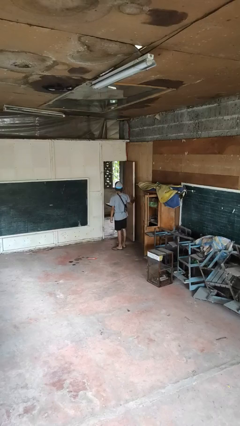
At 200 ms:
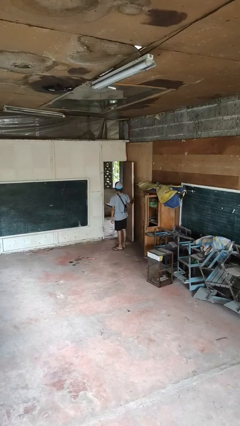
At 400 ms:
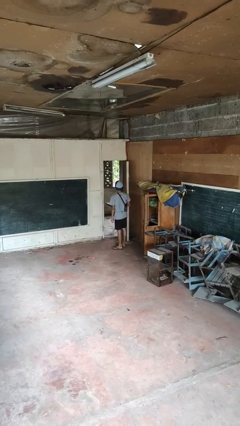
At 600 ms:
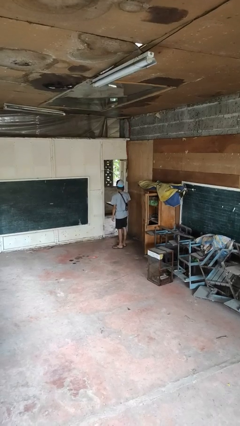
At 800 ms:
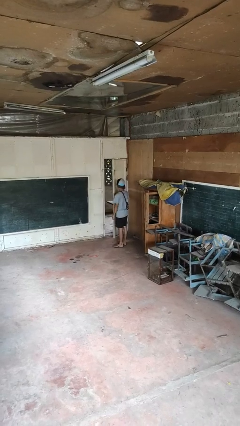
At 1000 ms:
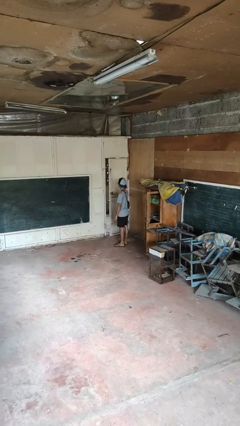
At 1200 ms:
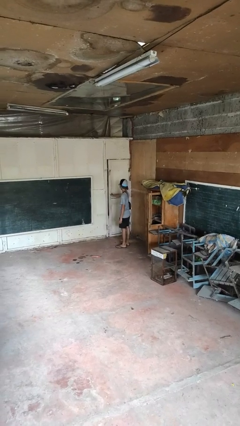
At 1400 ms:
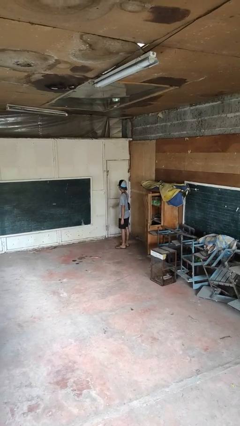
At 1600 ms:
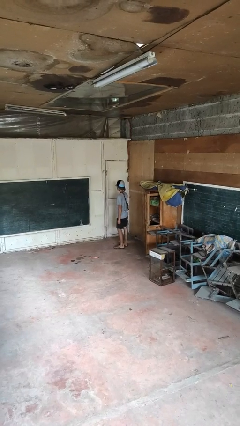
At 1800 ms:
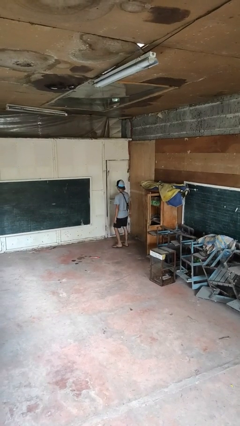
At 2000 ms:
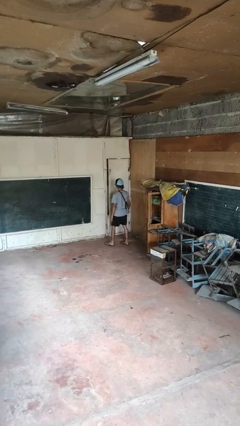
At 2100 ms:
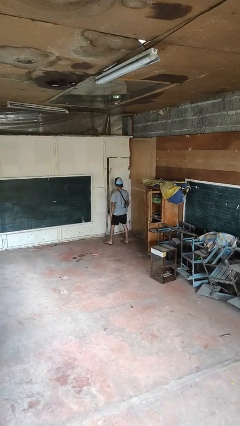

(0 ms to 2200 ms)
person closes facility door

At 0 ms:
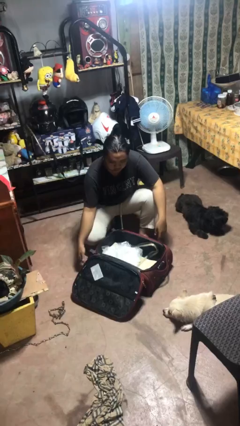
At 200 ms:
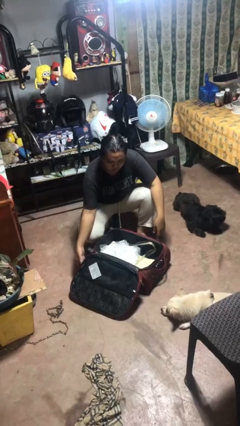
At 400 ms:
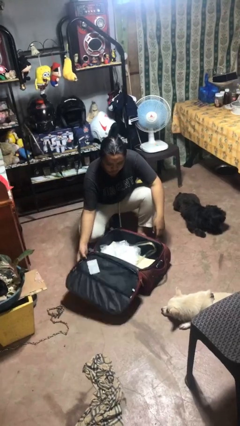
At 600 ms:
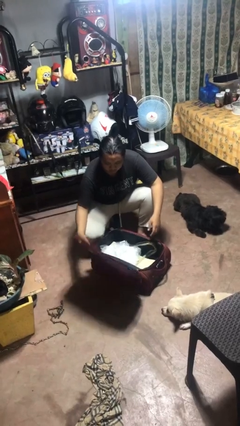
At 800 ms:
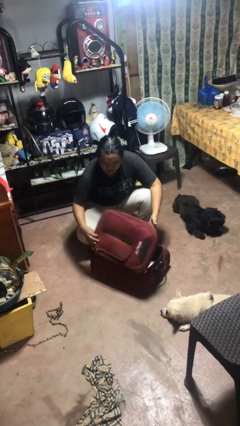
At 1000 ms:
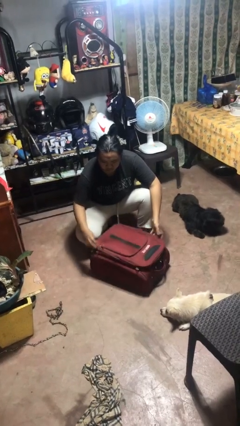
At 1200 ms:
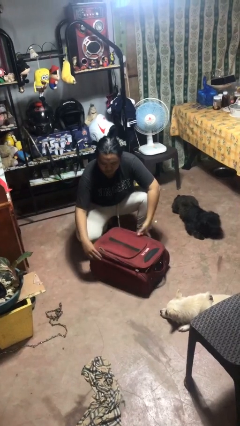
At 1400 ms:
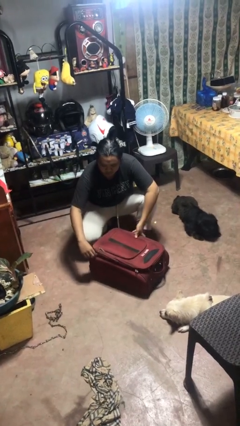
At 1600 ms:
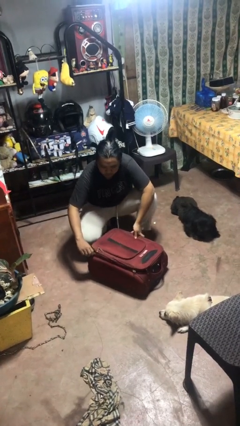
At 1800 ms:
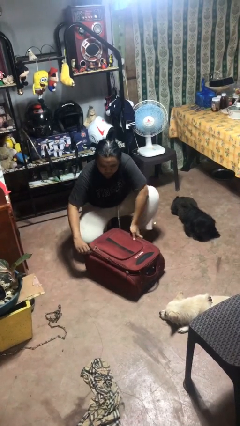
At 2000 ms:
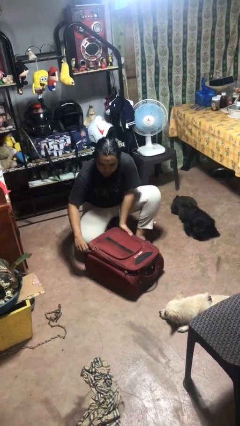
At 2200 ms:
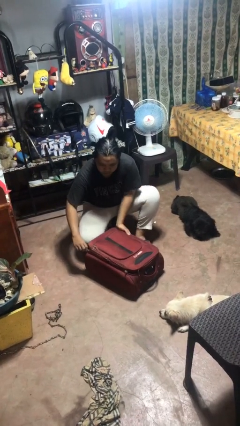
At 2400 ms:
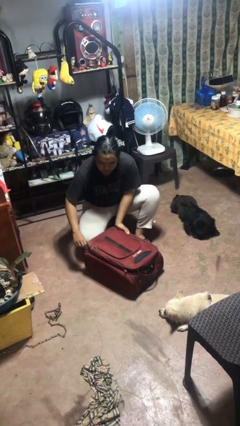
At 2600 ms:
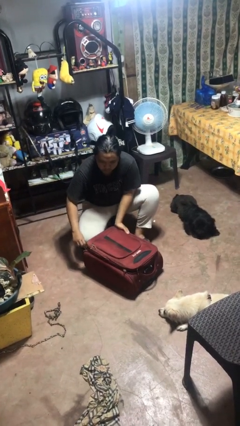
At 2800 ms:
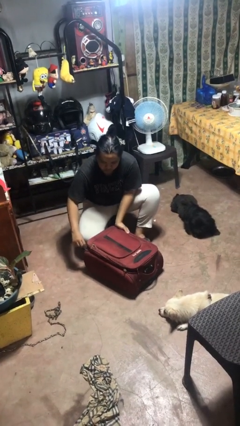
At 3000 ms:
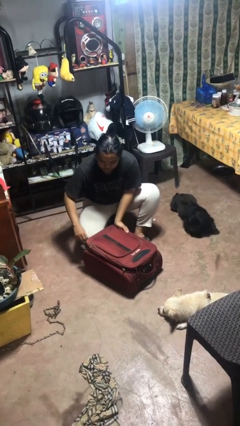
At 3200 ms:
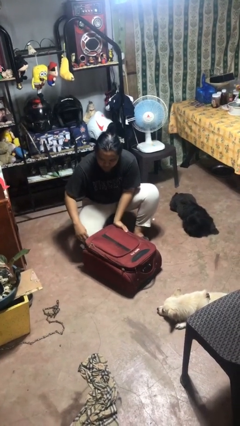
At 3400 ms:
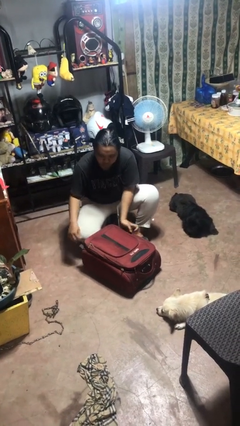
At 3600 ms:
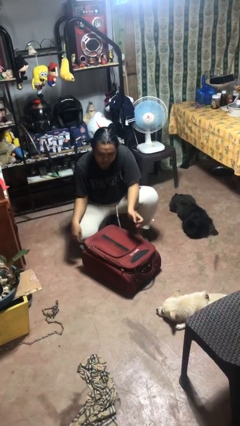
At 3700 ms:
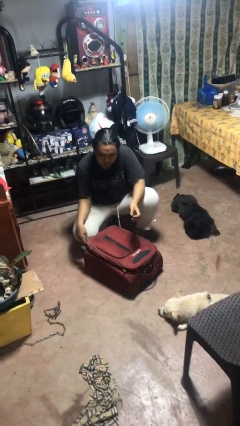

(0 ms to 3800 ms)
person closes suitcase

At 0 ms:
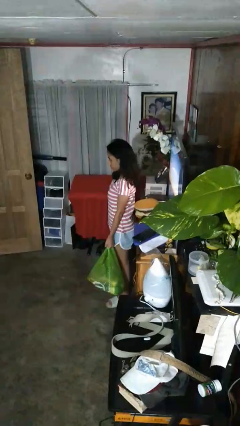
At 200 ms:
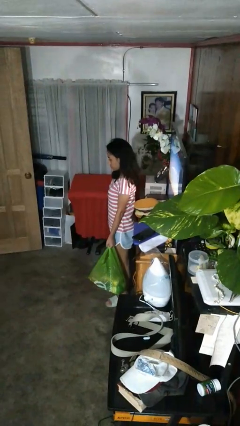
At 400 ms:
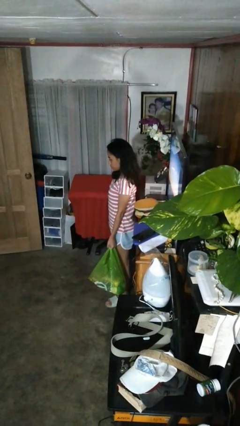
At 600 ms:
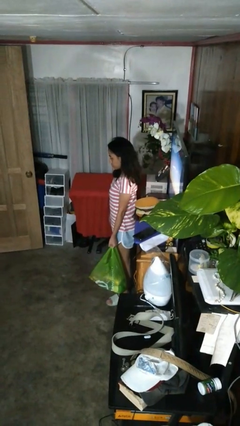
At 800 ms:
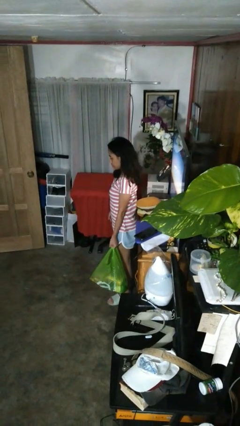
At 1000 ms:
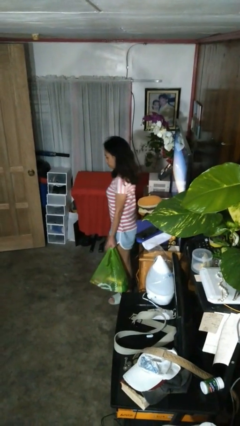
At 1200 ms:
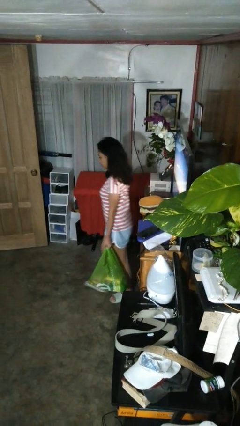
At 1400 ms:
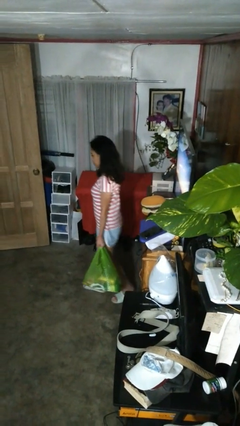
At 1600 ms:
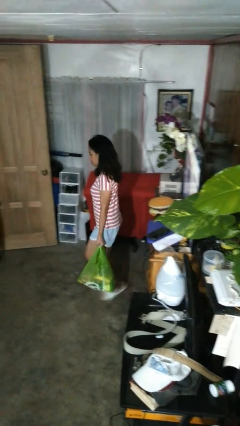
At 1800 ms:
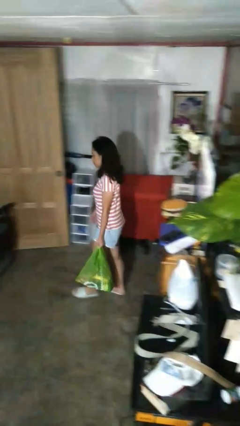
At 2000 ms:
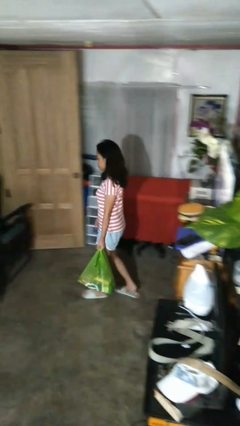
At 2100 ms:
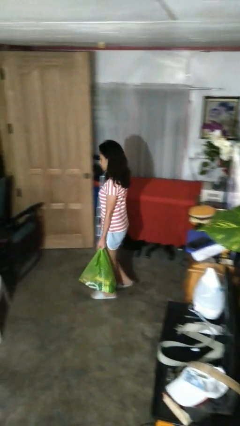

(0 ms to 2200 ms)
person carries groceries

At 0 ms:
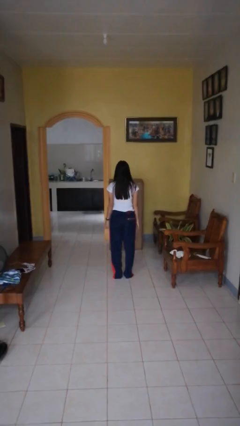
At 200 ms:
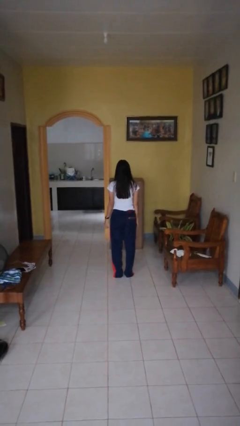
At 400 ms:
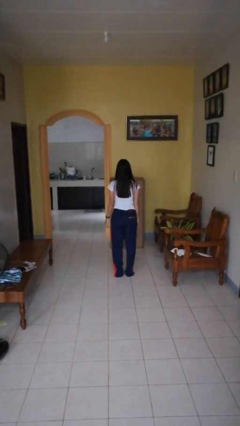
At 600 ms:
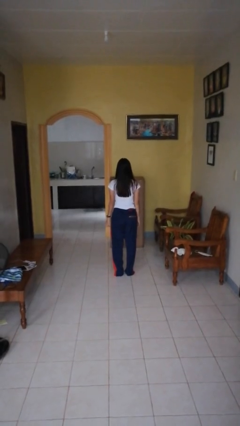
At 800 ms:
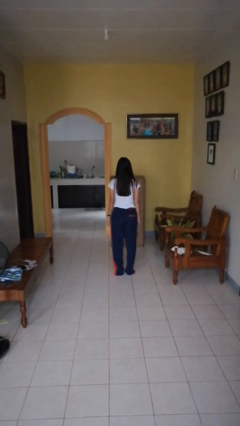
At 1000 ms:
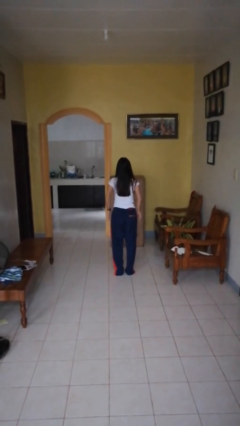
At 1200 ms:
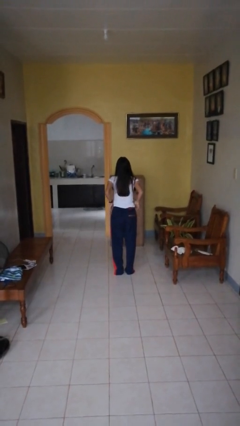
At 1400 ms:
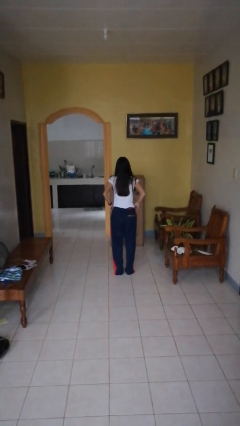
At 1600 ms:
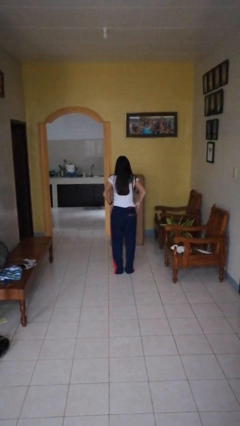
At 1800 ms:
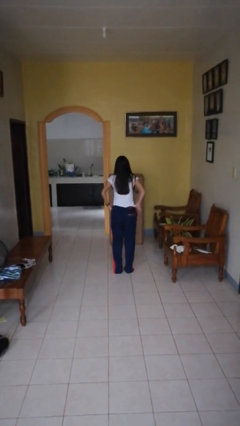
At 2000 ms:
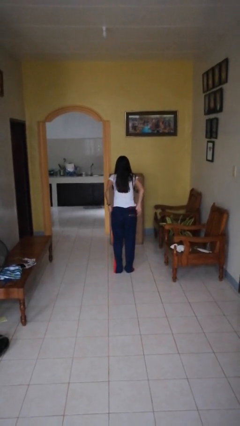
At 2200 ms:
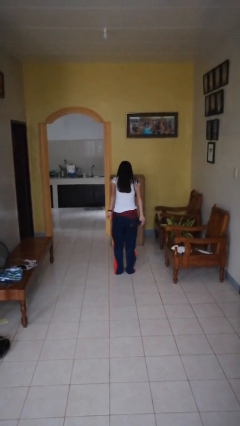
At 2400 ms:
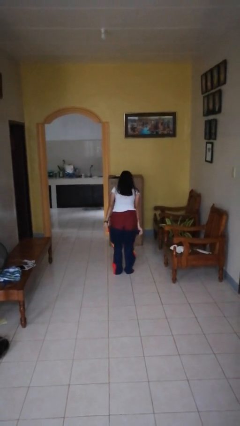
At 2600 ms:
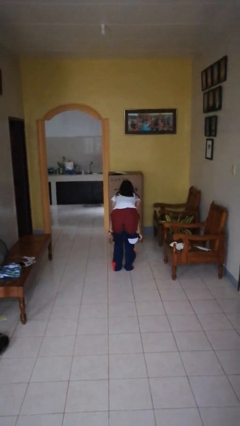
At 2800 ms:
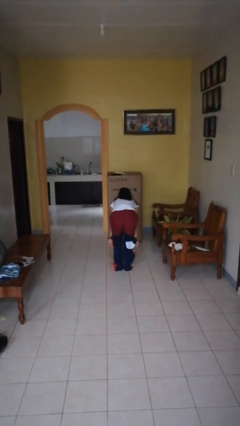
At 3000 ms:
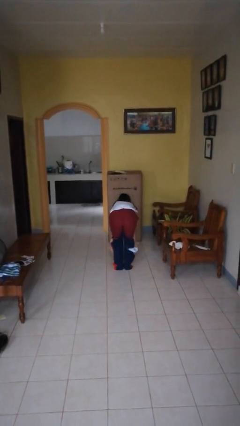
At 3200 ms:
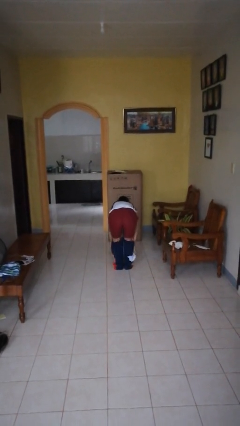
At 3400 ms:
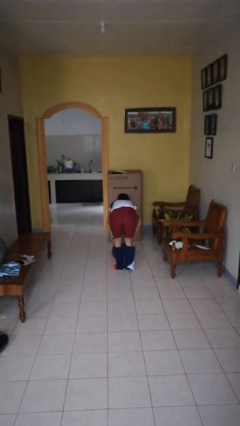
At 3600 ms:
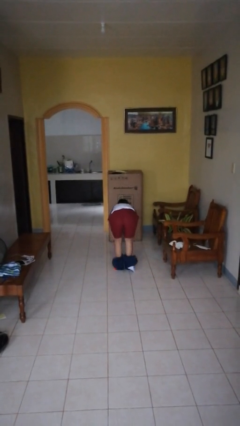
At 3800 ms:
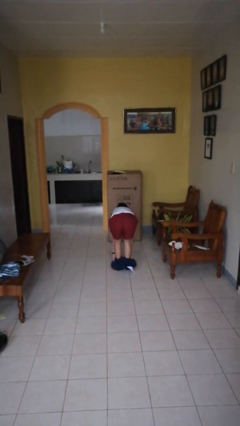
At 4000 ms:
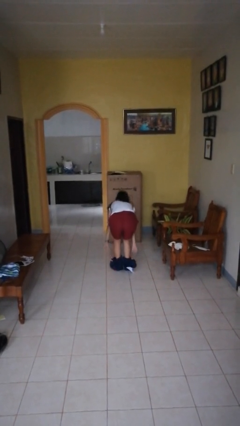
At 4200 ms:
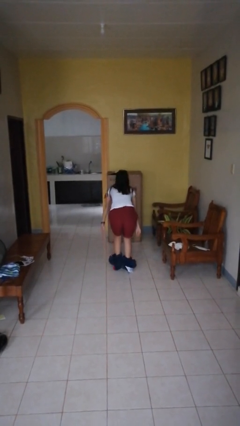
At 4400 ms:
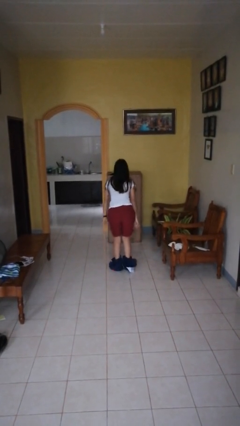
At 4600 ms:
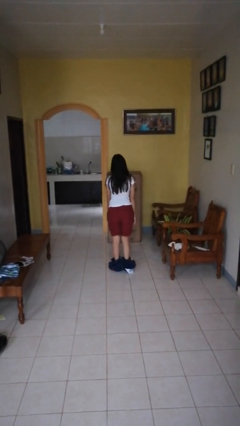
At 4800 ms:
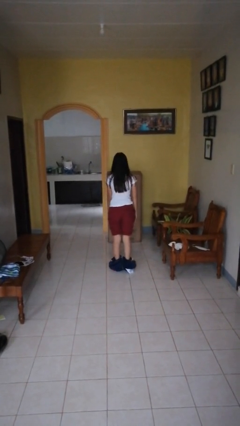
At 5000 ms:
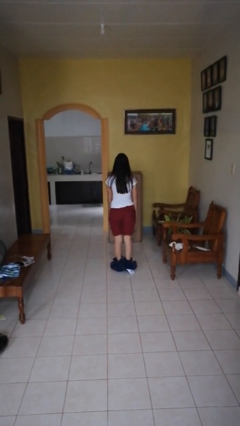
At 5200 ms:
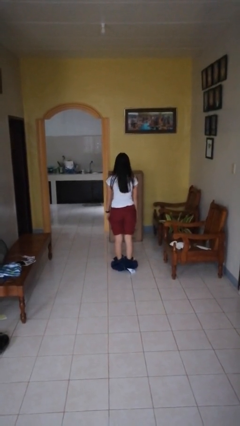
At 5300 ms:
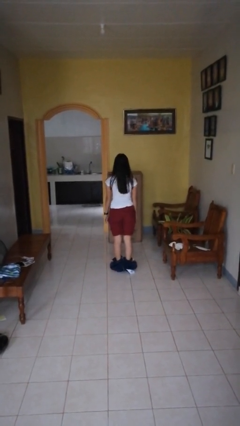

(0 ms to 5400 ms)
person takes off pants

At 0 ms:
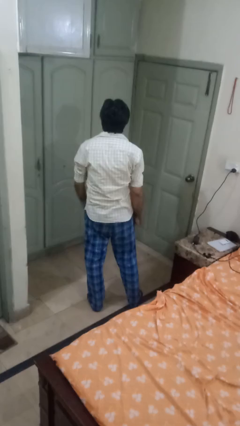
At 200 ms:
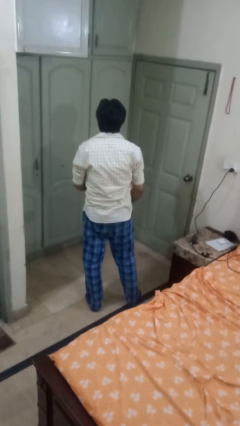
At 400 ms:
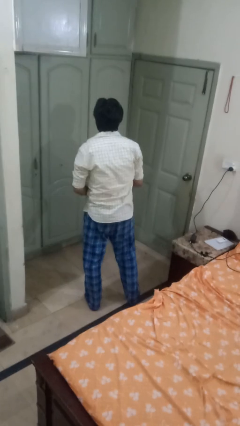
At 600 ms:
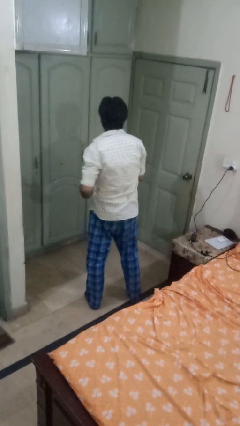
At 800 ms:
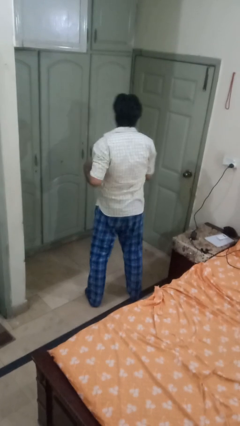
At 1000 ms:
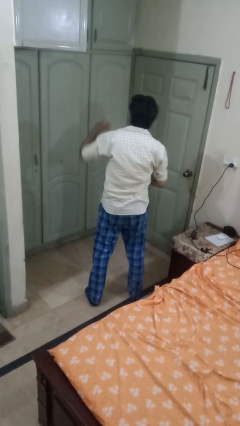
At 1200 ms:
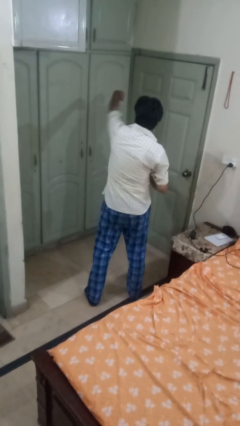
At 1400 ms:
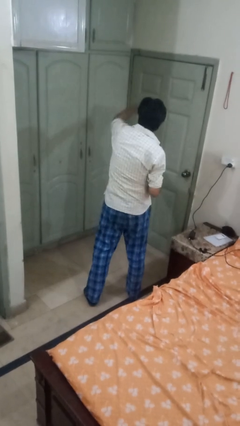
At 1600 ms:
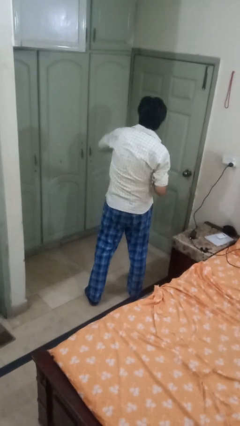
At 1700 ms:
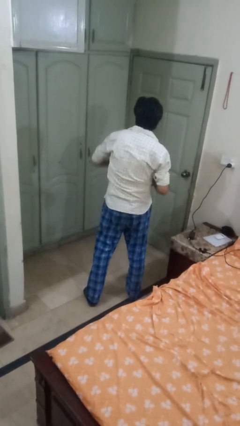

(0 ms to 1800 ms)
person punches

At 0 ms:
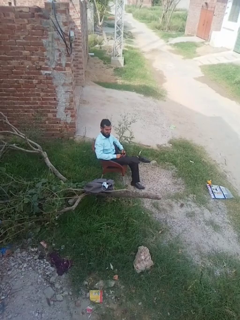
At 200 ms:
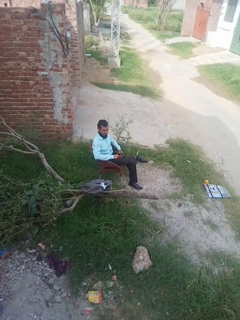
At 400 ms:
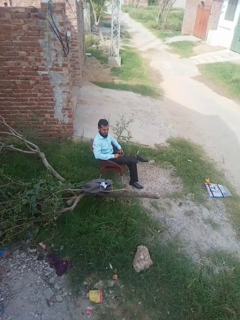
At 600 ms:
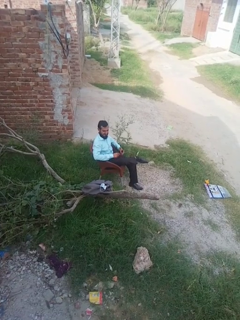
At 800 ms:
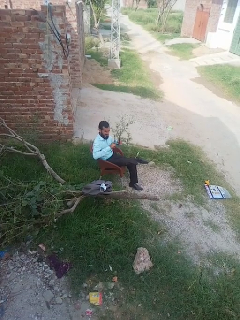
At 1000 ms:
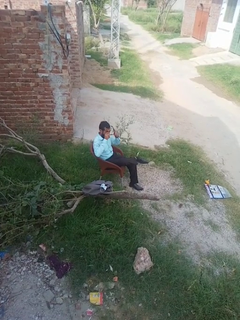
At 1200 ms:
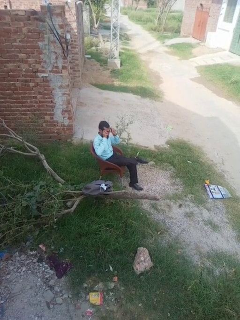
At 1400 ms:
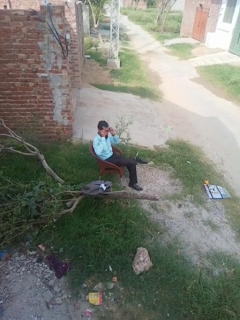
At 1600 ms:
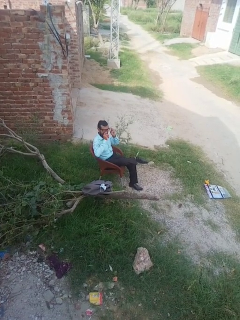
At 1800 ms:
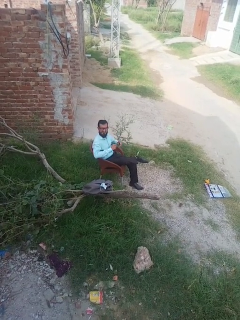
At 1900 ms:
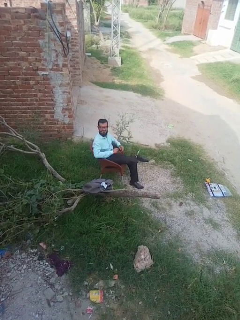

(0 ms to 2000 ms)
person puts on glasses

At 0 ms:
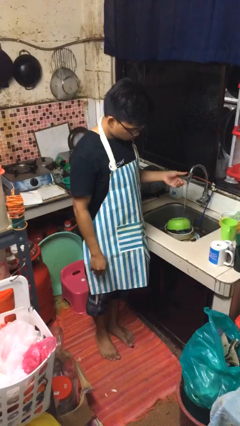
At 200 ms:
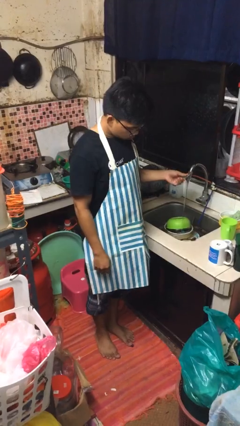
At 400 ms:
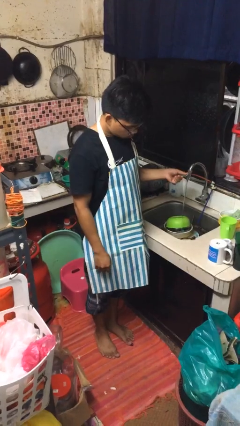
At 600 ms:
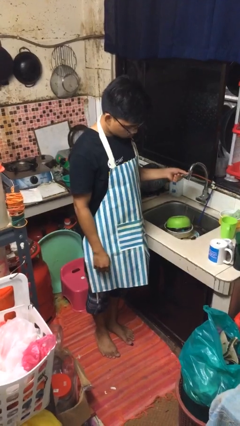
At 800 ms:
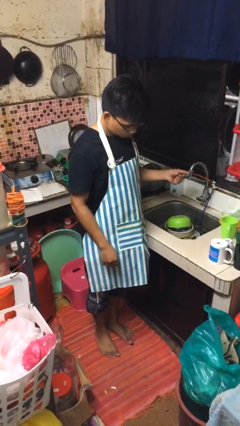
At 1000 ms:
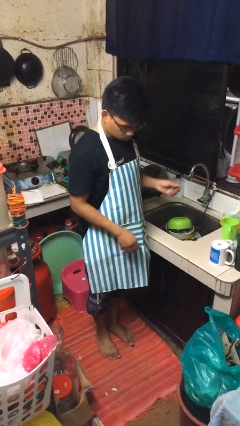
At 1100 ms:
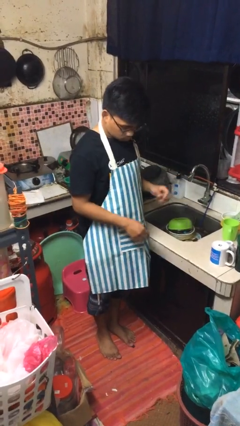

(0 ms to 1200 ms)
person turns off faucet
